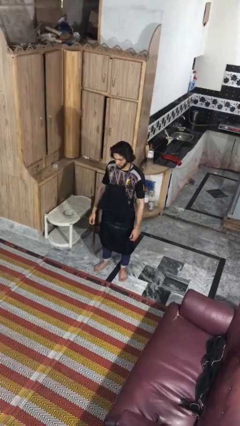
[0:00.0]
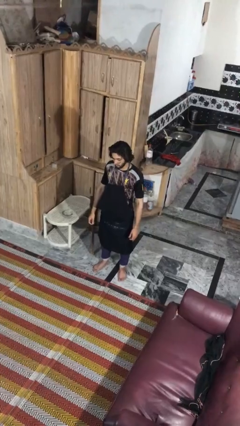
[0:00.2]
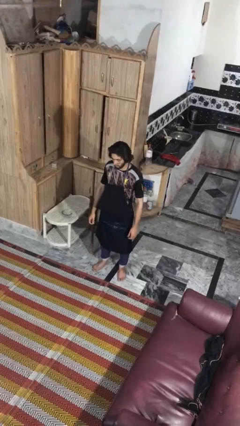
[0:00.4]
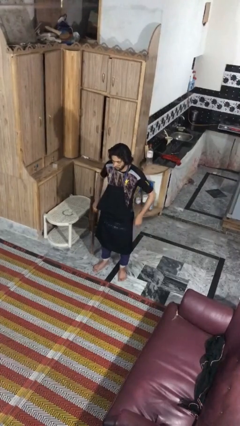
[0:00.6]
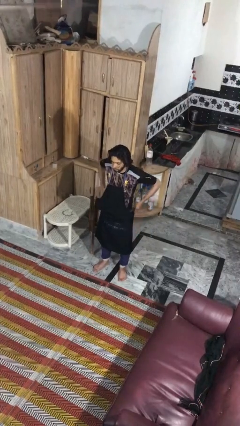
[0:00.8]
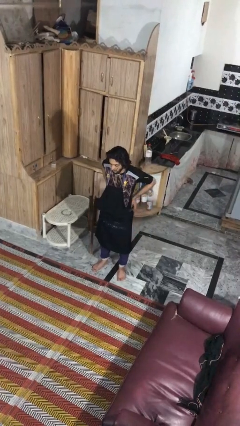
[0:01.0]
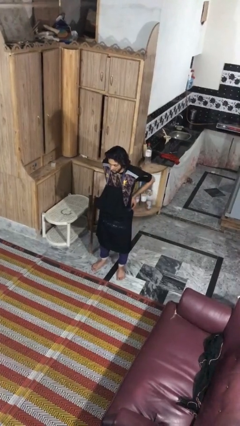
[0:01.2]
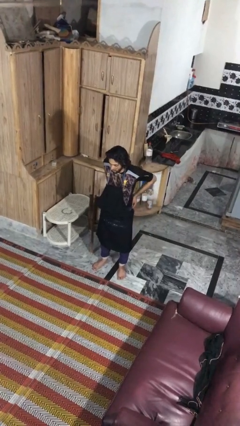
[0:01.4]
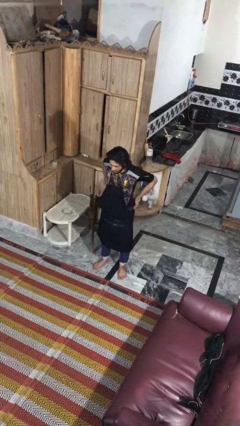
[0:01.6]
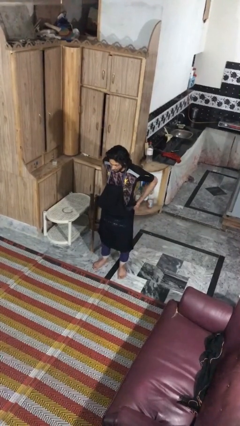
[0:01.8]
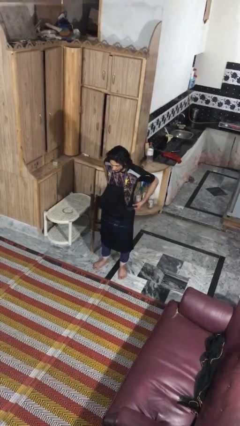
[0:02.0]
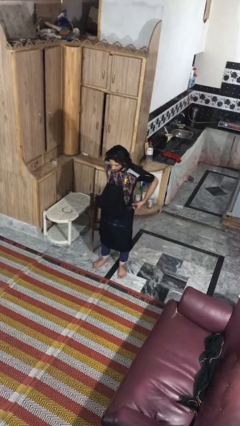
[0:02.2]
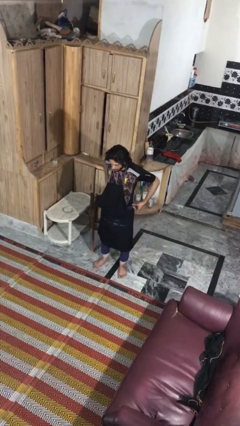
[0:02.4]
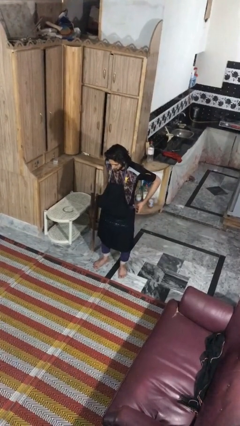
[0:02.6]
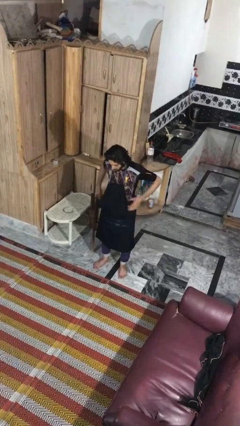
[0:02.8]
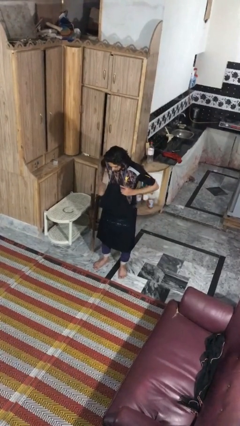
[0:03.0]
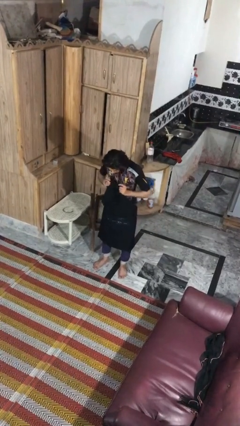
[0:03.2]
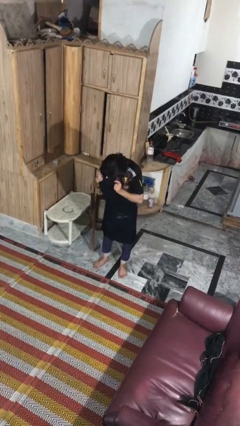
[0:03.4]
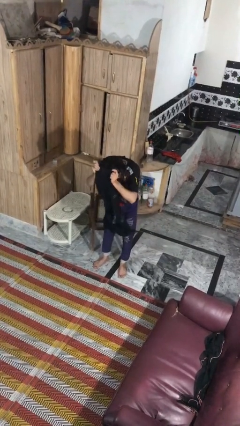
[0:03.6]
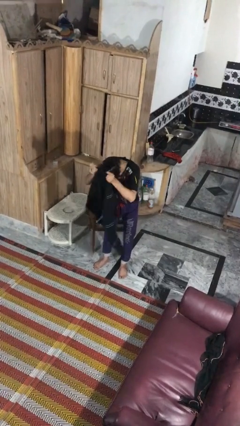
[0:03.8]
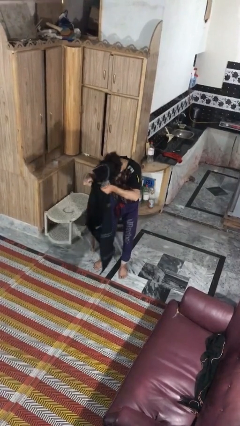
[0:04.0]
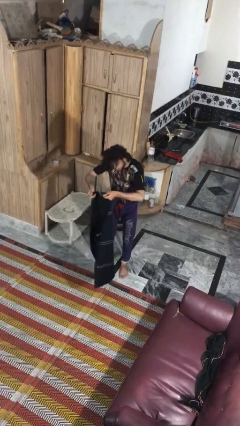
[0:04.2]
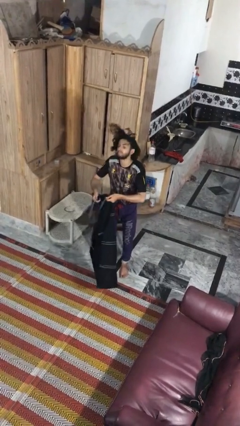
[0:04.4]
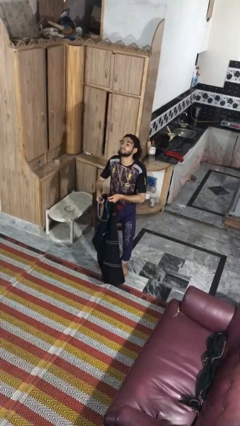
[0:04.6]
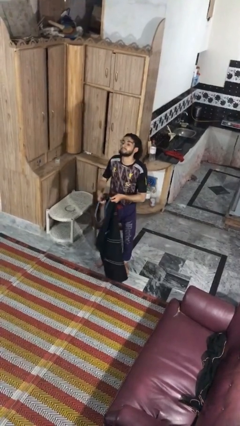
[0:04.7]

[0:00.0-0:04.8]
person takes off apron

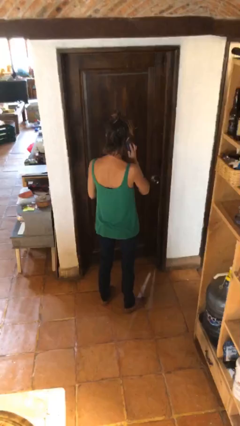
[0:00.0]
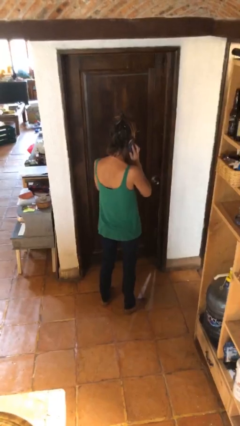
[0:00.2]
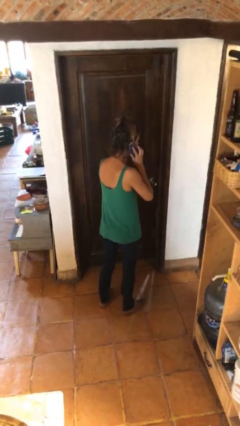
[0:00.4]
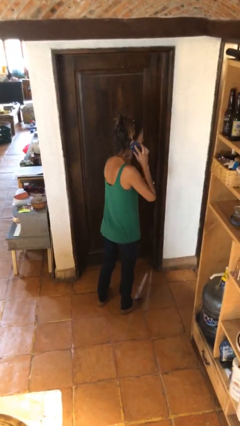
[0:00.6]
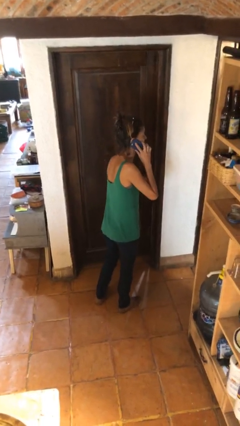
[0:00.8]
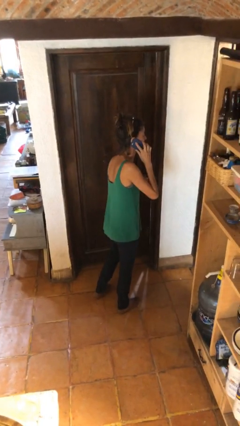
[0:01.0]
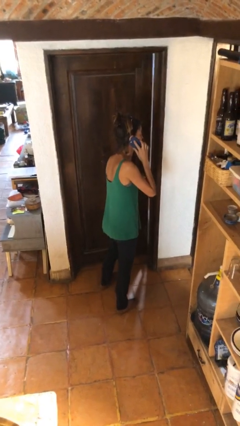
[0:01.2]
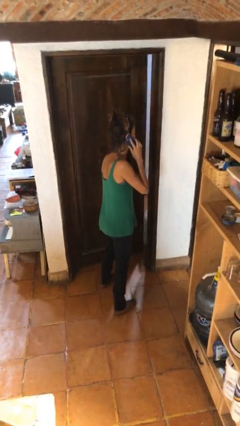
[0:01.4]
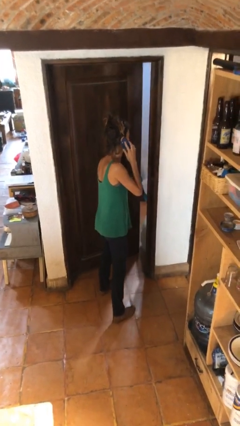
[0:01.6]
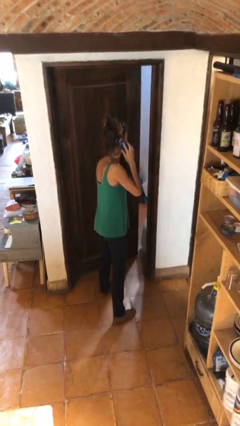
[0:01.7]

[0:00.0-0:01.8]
person opens facility door

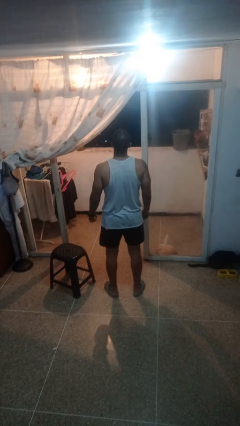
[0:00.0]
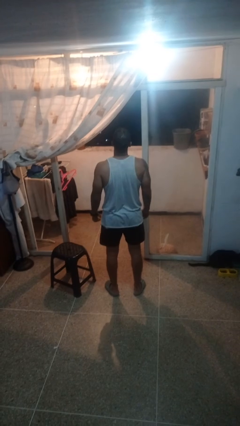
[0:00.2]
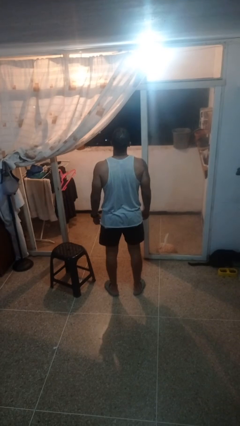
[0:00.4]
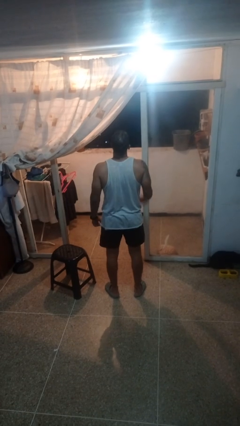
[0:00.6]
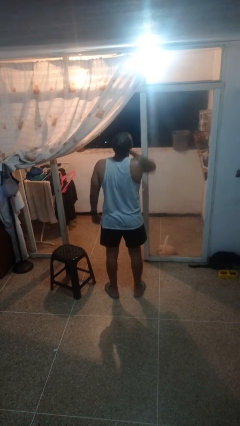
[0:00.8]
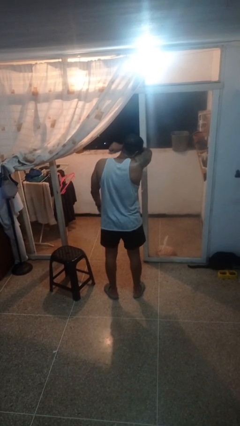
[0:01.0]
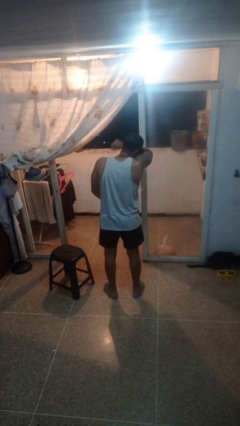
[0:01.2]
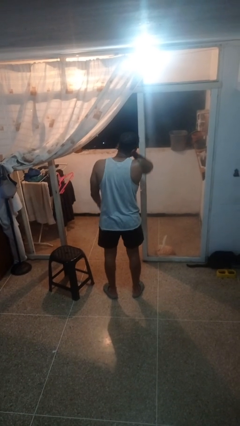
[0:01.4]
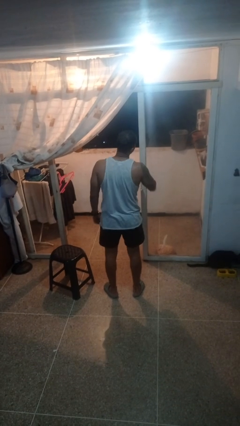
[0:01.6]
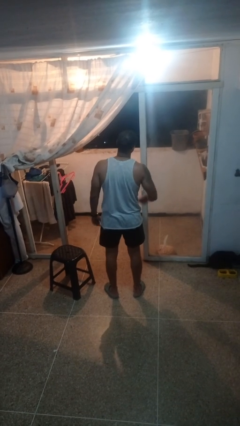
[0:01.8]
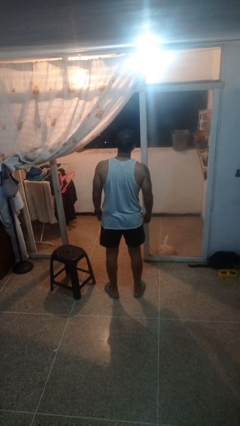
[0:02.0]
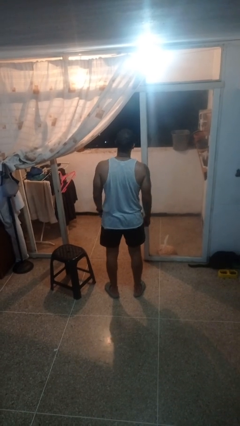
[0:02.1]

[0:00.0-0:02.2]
person sneezes into arm

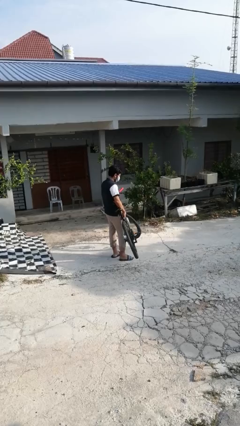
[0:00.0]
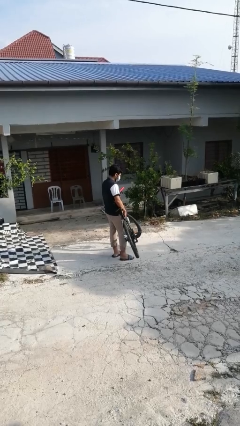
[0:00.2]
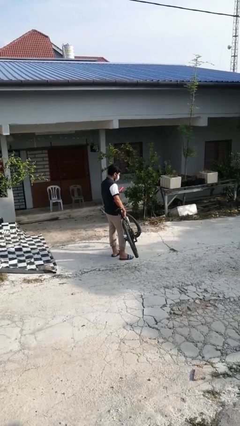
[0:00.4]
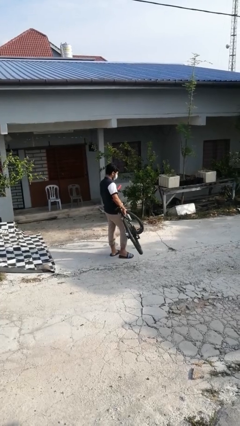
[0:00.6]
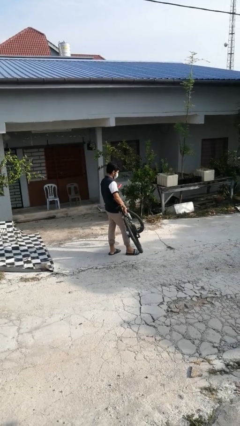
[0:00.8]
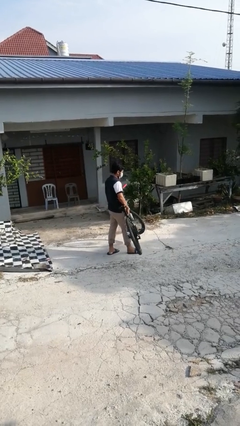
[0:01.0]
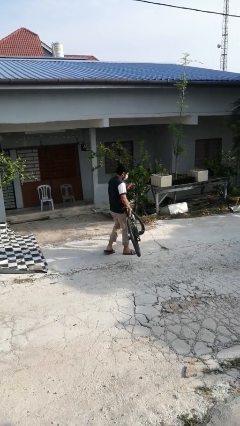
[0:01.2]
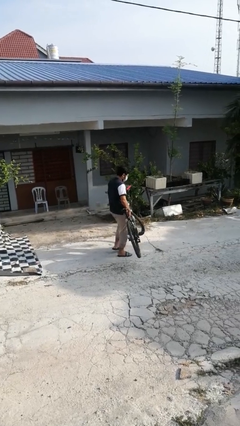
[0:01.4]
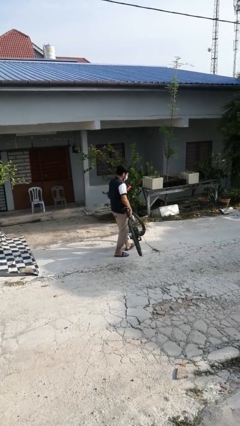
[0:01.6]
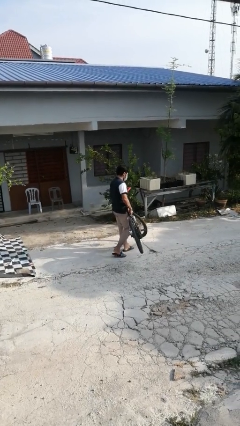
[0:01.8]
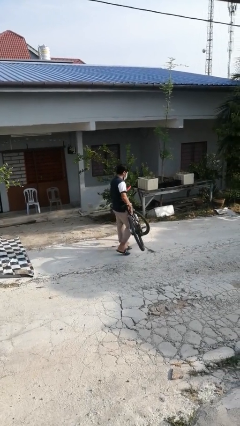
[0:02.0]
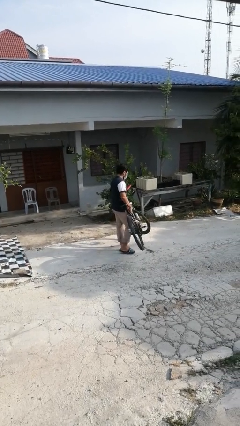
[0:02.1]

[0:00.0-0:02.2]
person carries bicycle

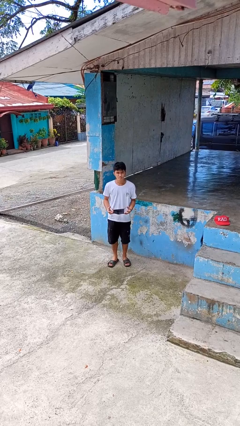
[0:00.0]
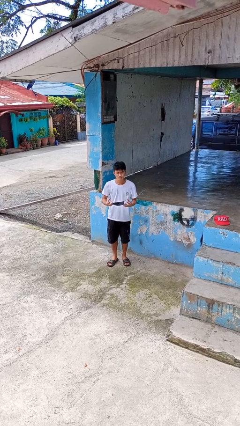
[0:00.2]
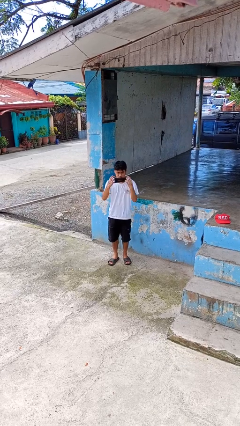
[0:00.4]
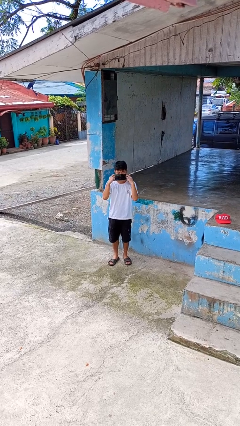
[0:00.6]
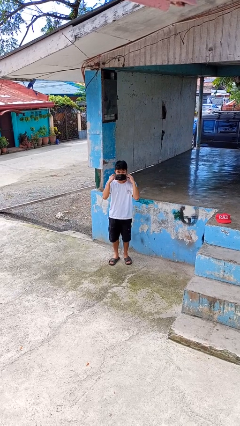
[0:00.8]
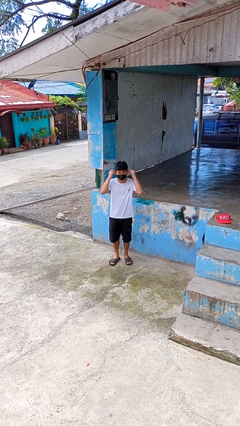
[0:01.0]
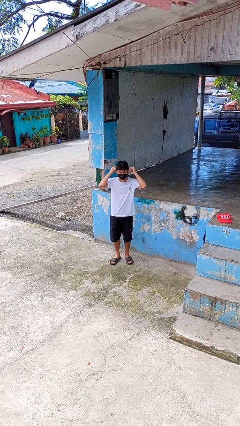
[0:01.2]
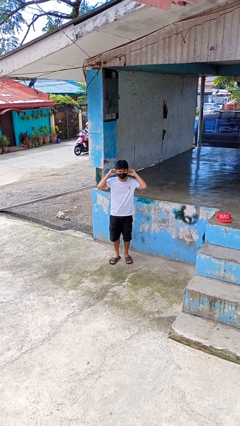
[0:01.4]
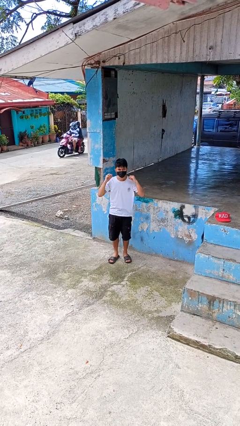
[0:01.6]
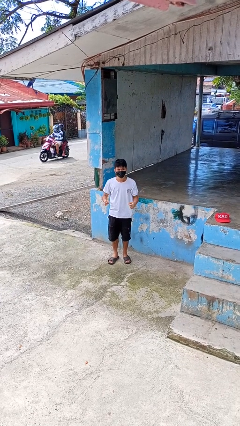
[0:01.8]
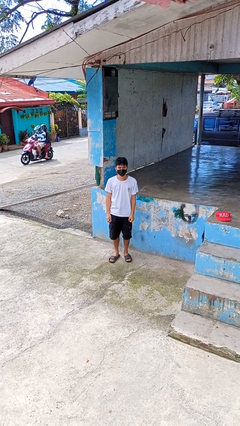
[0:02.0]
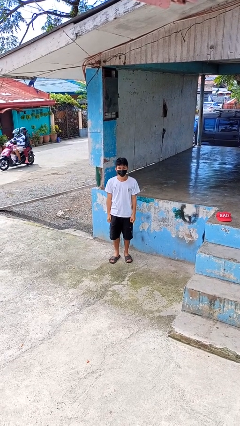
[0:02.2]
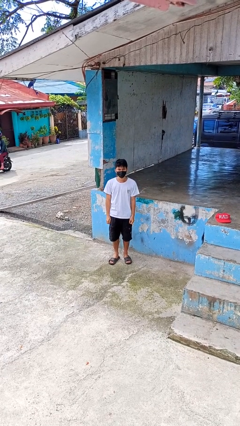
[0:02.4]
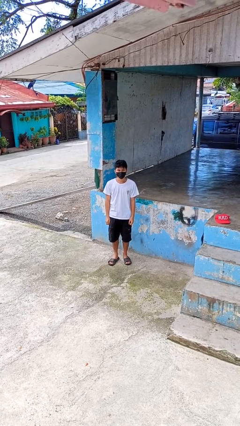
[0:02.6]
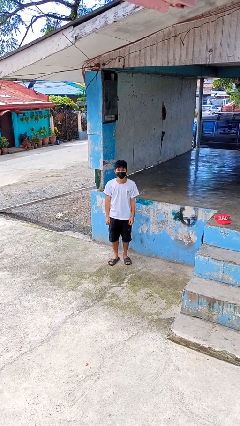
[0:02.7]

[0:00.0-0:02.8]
person puts on facemask

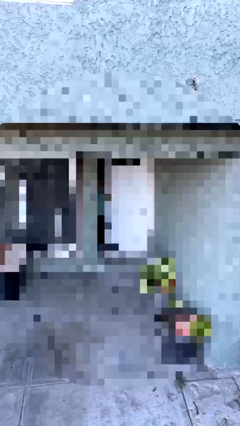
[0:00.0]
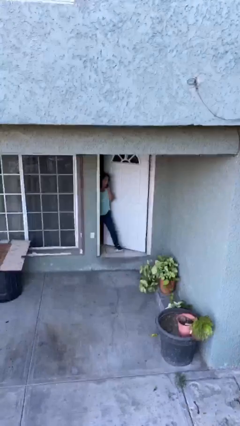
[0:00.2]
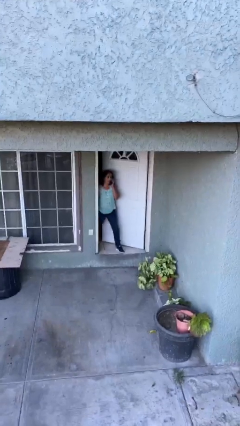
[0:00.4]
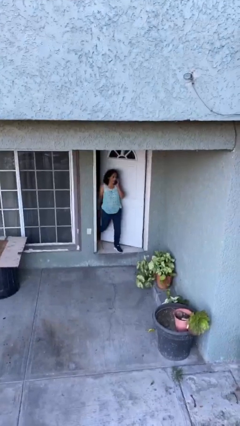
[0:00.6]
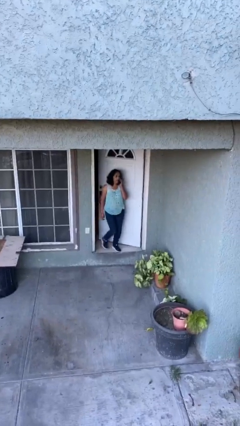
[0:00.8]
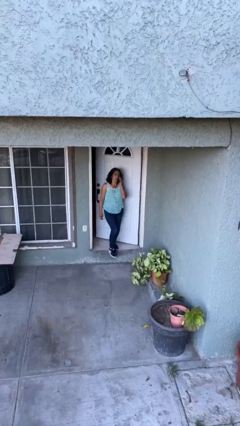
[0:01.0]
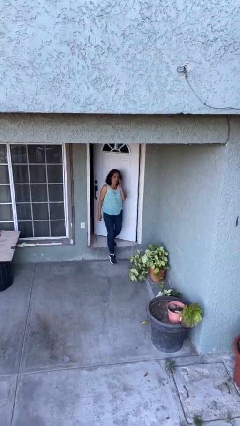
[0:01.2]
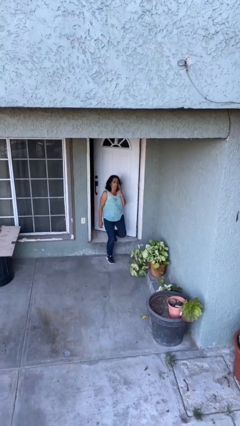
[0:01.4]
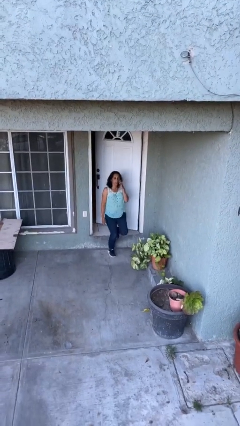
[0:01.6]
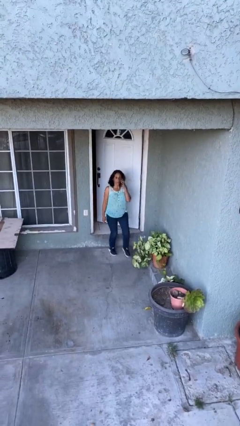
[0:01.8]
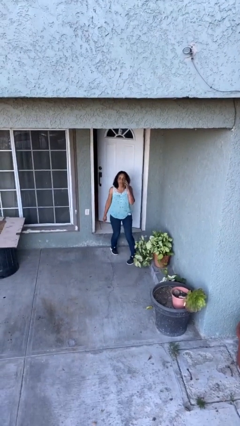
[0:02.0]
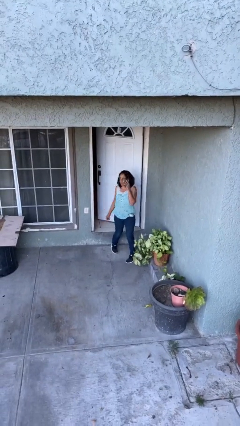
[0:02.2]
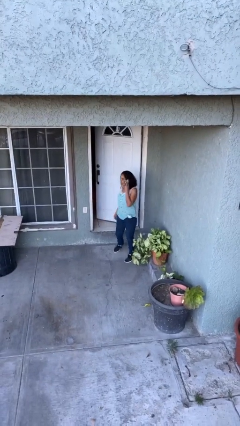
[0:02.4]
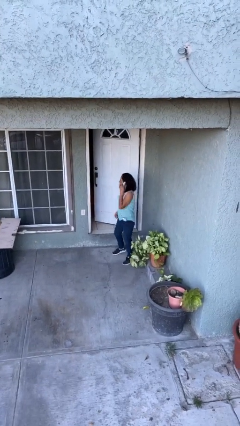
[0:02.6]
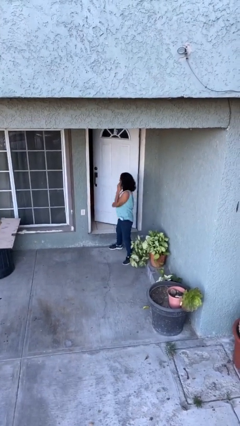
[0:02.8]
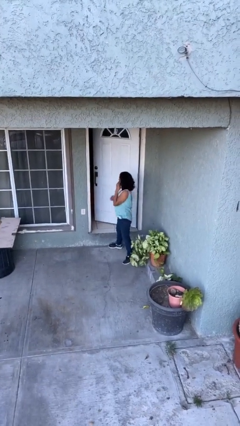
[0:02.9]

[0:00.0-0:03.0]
person enters scene through structure
